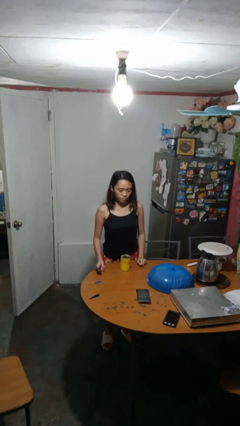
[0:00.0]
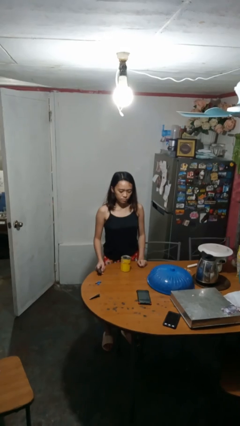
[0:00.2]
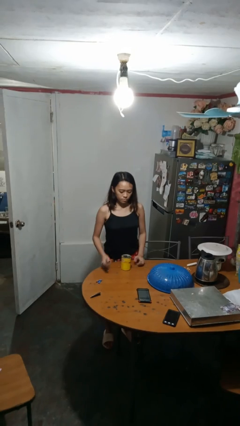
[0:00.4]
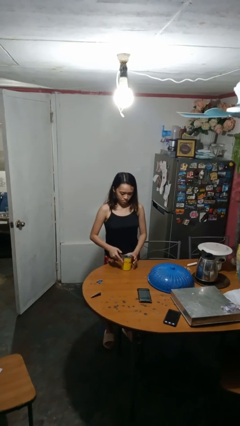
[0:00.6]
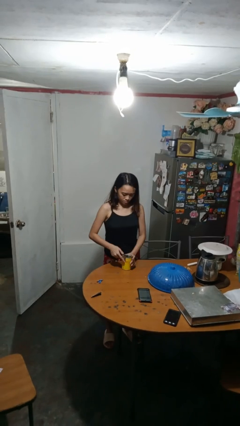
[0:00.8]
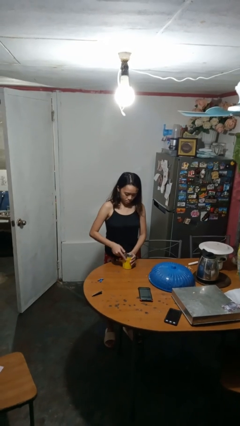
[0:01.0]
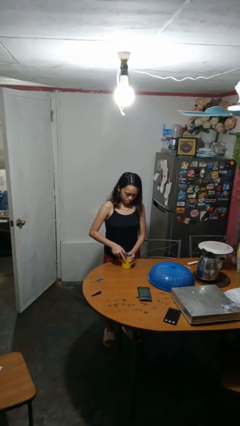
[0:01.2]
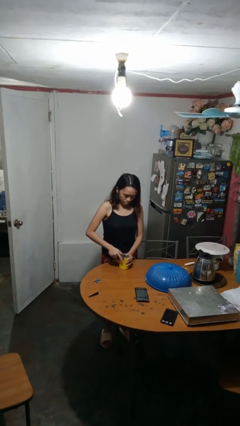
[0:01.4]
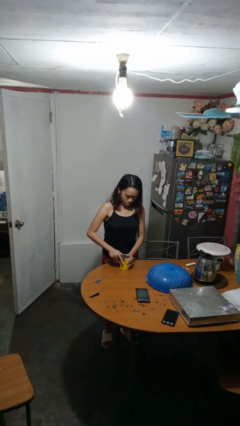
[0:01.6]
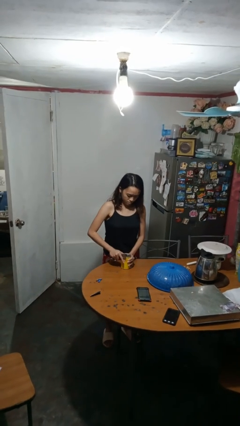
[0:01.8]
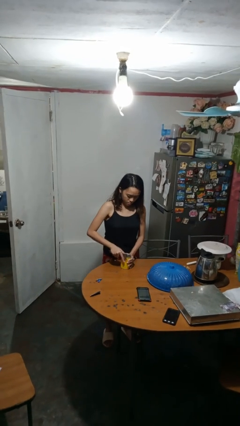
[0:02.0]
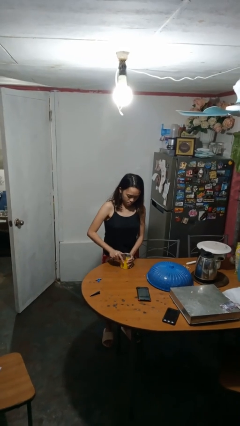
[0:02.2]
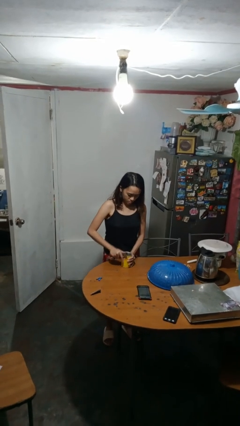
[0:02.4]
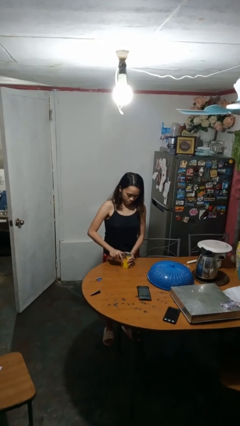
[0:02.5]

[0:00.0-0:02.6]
person opens can with can opener

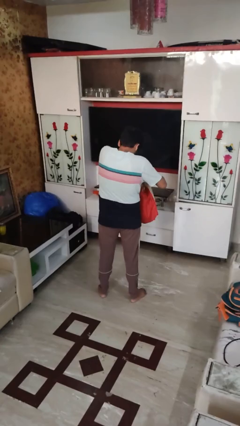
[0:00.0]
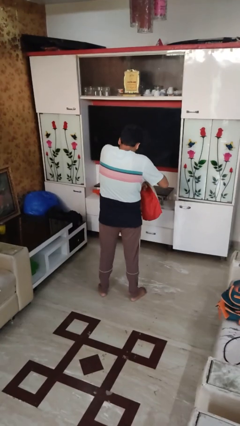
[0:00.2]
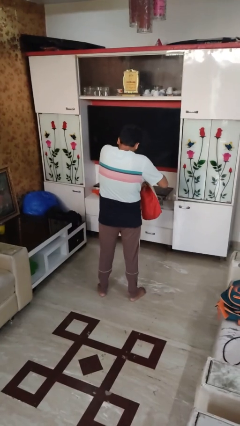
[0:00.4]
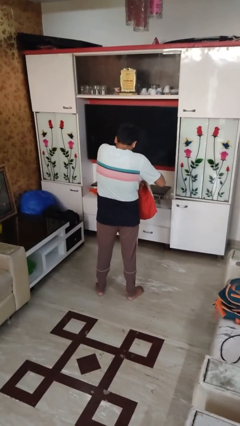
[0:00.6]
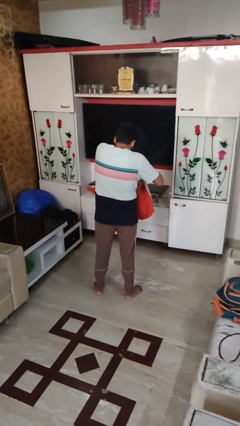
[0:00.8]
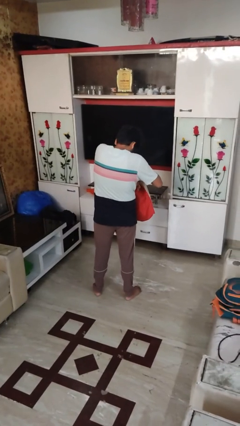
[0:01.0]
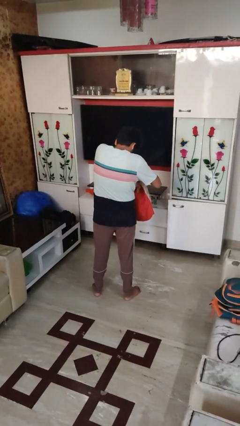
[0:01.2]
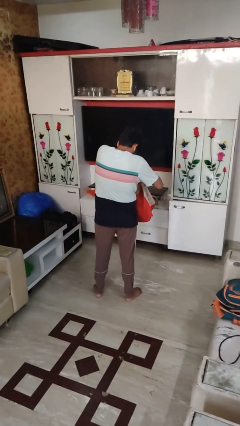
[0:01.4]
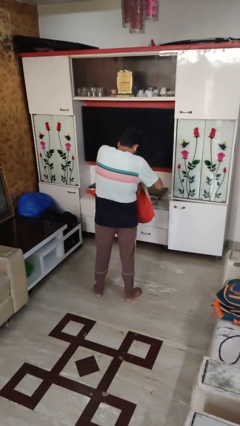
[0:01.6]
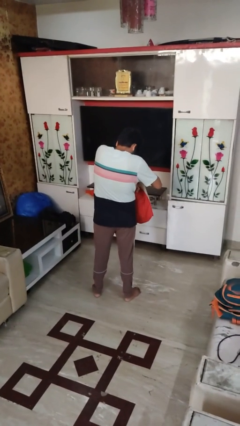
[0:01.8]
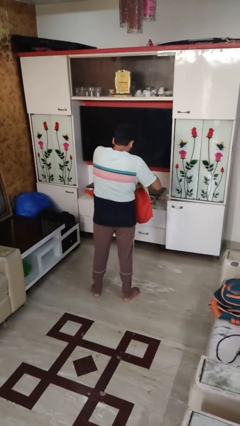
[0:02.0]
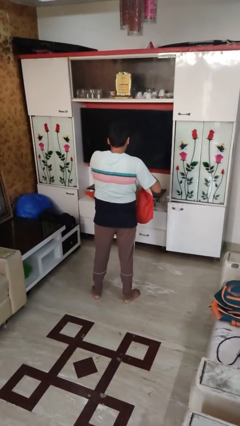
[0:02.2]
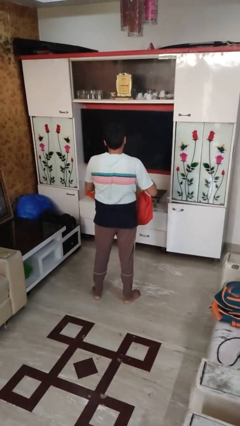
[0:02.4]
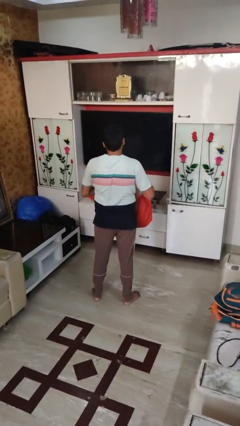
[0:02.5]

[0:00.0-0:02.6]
person searches in bag

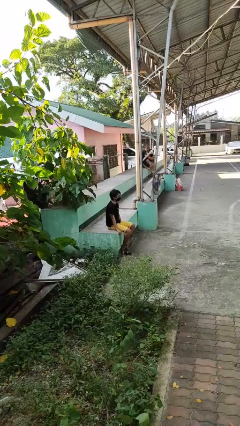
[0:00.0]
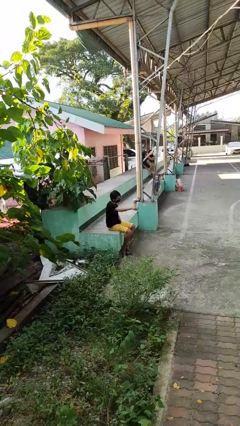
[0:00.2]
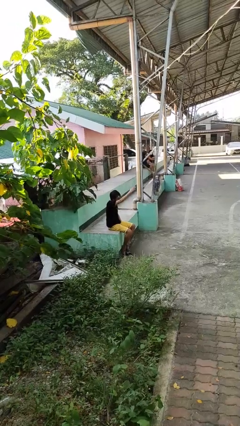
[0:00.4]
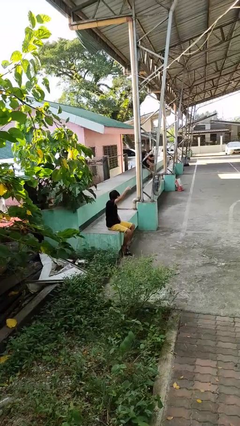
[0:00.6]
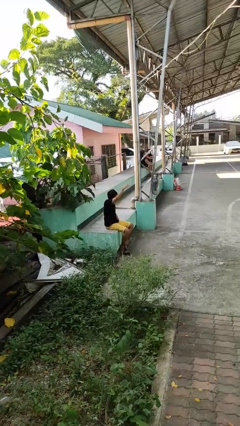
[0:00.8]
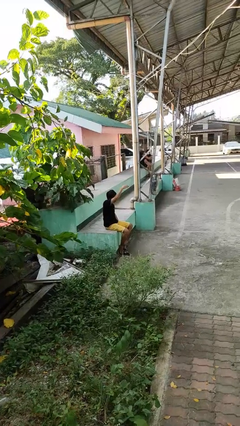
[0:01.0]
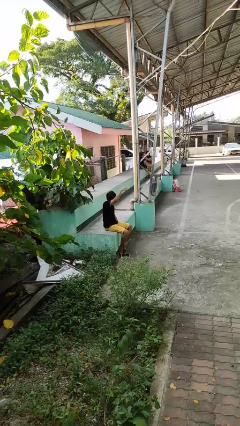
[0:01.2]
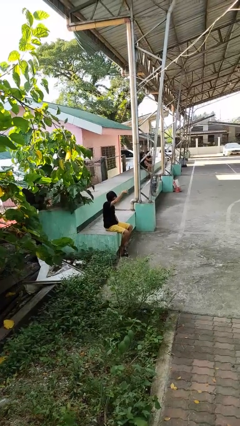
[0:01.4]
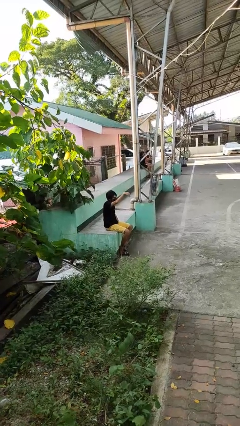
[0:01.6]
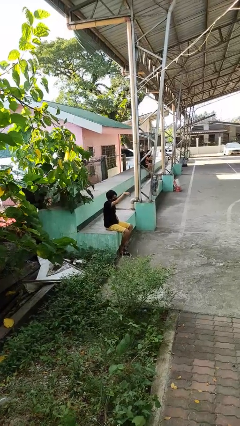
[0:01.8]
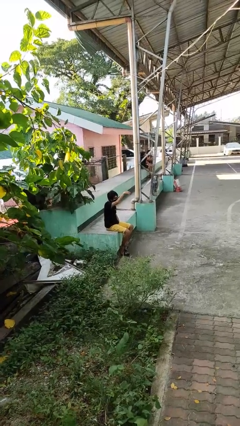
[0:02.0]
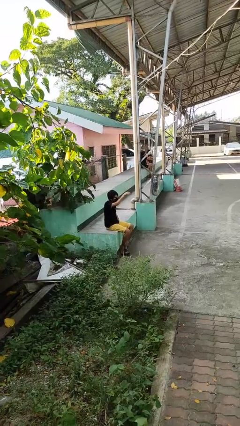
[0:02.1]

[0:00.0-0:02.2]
person gestures come here

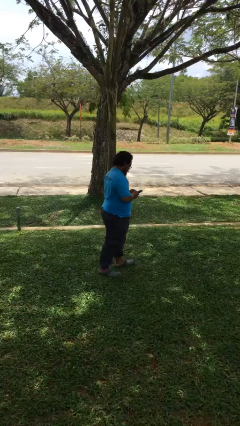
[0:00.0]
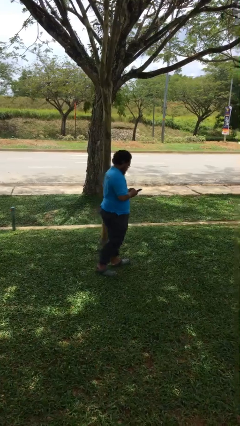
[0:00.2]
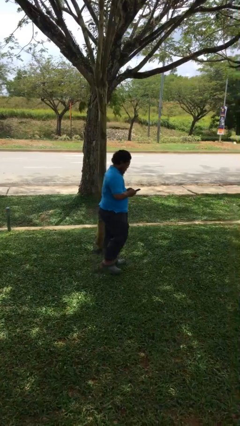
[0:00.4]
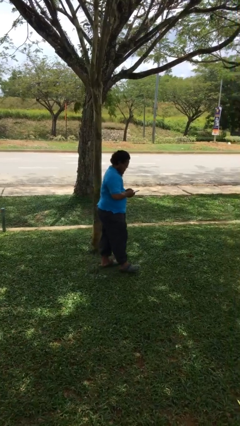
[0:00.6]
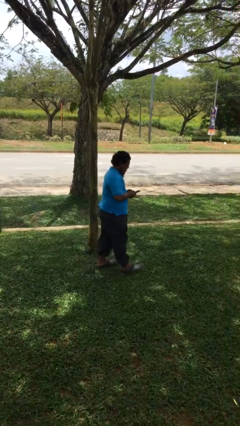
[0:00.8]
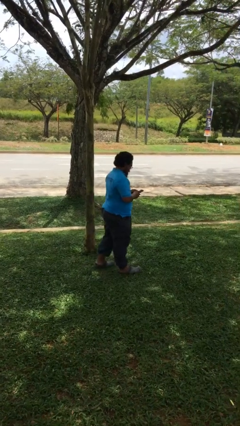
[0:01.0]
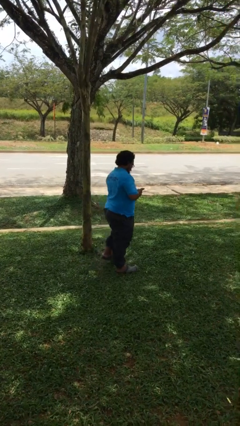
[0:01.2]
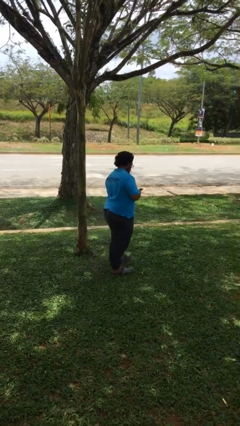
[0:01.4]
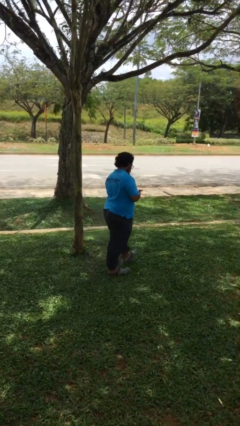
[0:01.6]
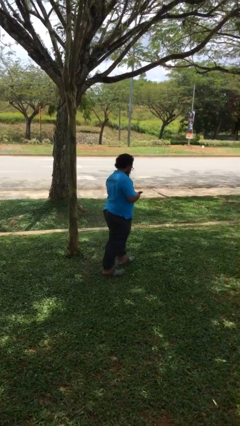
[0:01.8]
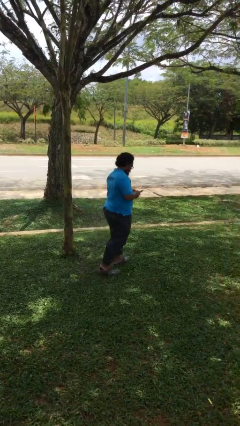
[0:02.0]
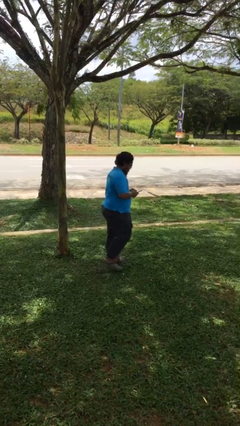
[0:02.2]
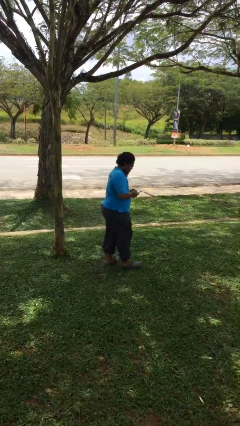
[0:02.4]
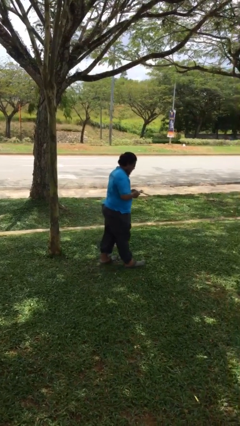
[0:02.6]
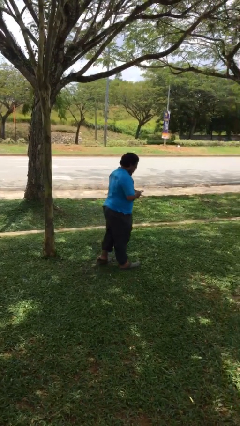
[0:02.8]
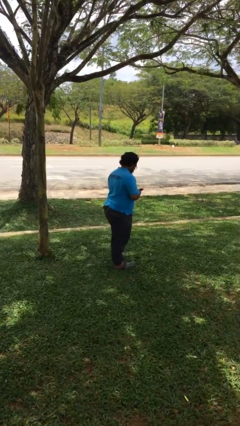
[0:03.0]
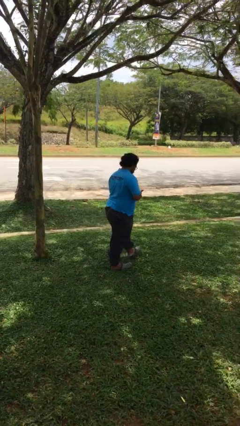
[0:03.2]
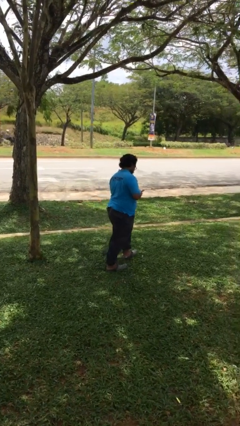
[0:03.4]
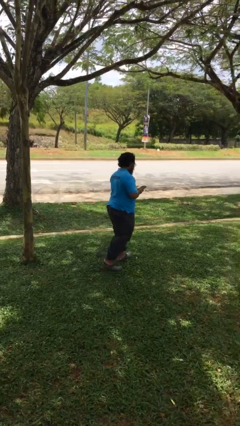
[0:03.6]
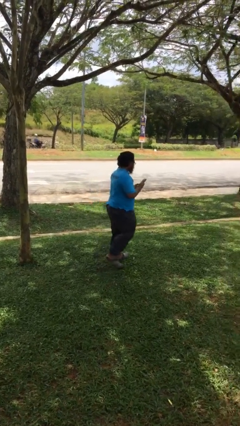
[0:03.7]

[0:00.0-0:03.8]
person texts on phone

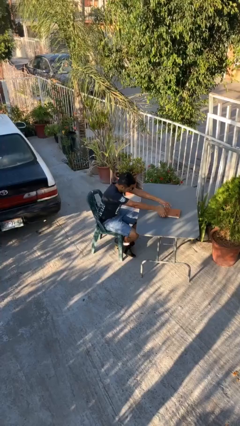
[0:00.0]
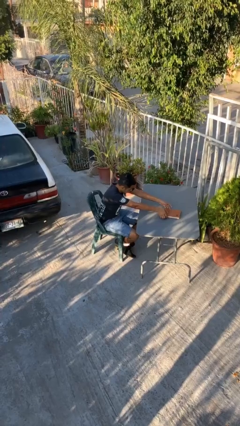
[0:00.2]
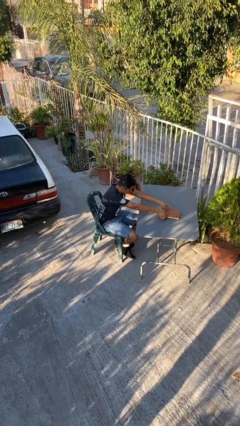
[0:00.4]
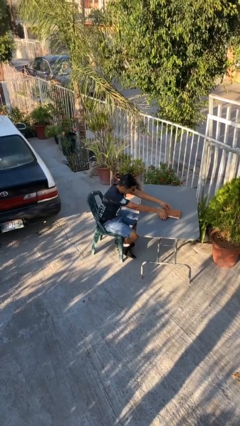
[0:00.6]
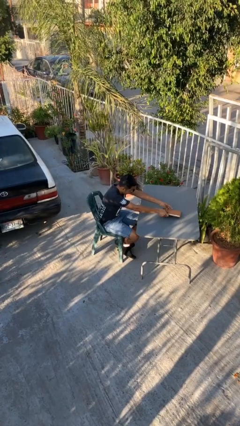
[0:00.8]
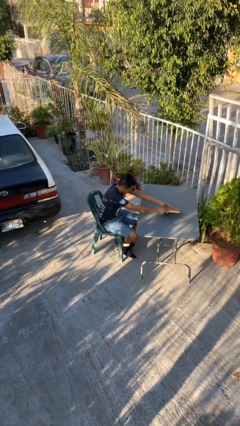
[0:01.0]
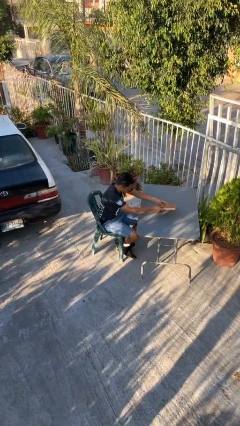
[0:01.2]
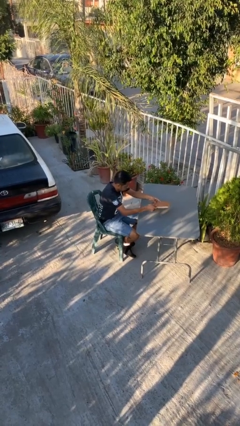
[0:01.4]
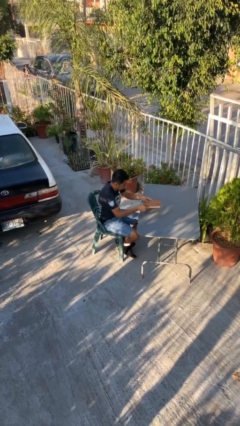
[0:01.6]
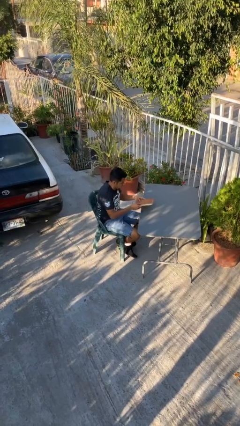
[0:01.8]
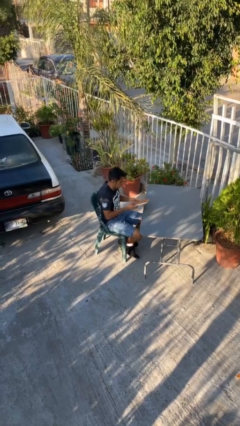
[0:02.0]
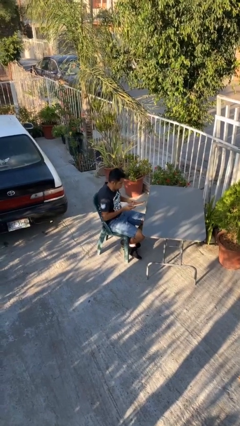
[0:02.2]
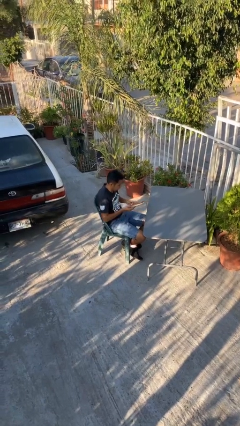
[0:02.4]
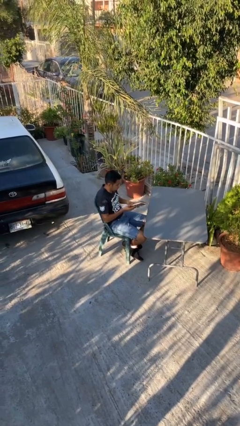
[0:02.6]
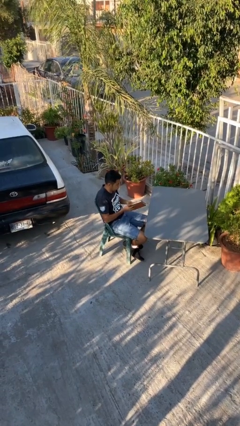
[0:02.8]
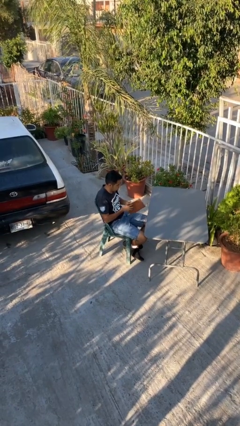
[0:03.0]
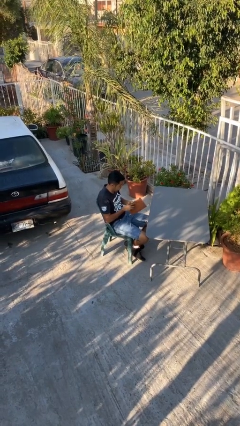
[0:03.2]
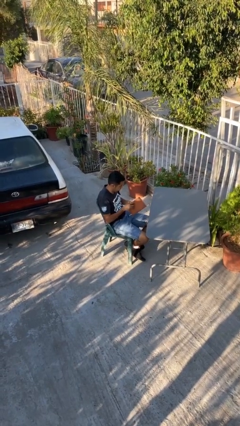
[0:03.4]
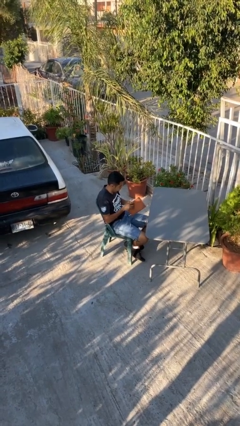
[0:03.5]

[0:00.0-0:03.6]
person picks up object from table

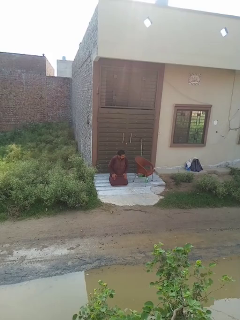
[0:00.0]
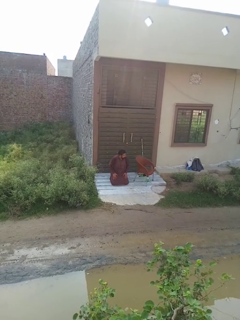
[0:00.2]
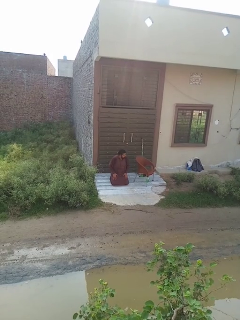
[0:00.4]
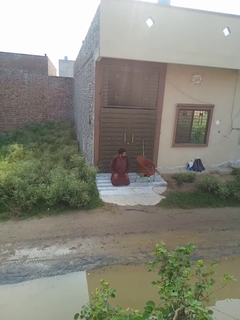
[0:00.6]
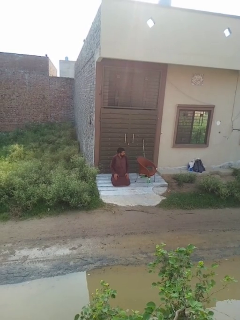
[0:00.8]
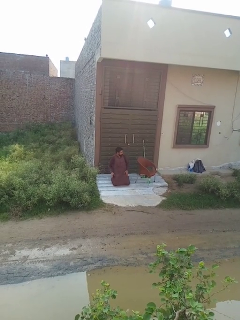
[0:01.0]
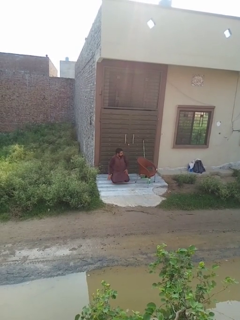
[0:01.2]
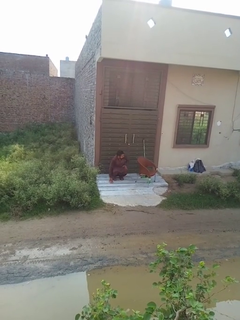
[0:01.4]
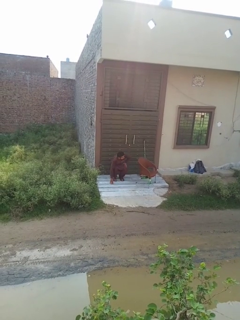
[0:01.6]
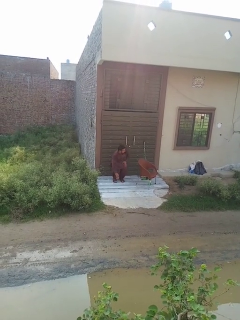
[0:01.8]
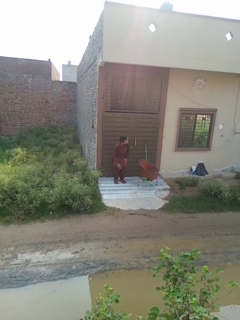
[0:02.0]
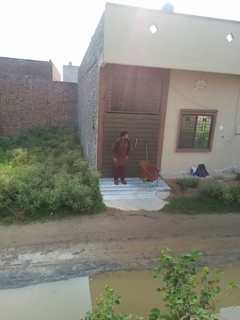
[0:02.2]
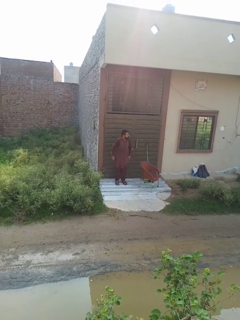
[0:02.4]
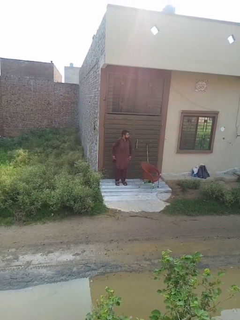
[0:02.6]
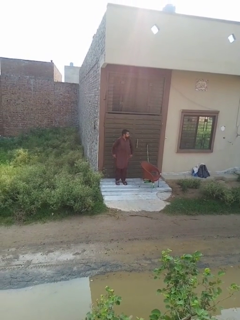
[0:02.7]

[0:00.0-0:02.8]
person stands up from floor

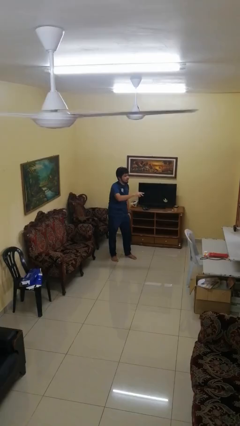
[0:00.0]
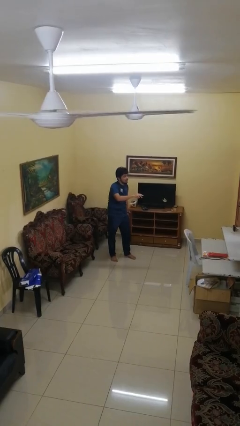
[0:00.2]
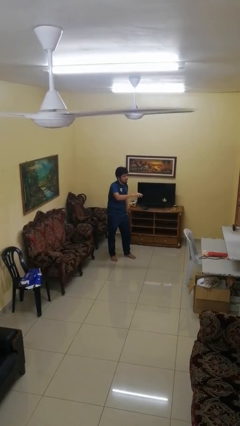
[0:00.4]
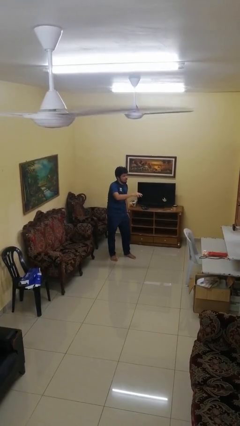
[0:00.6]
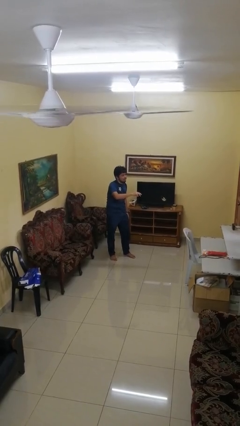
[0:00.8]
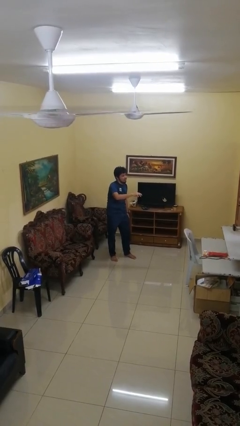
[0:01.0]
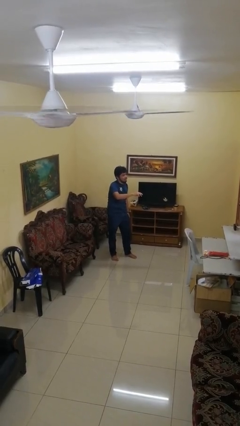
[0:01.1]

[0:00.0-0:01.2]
person gestures swipe down
